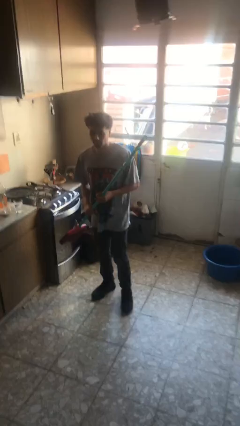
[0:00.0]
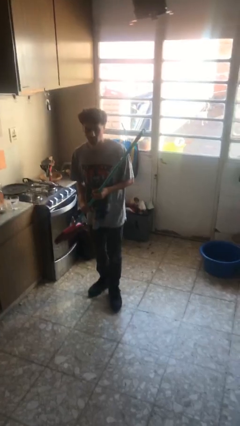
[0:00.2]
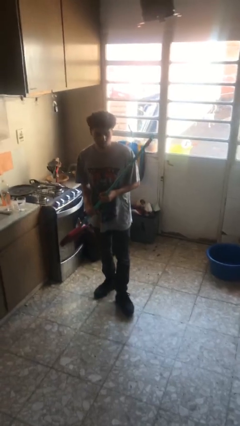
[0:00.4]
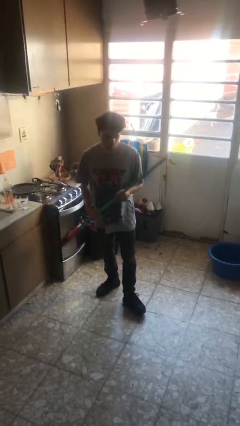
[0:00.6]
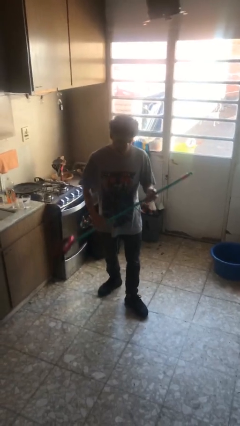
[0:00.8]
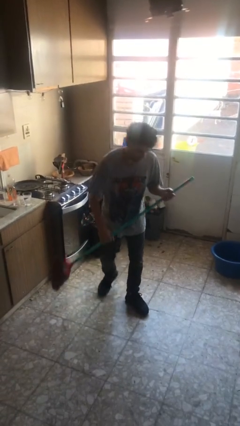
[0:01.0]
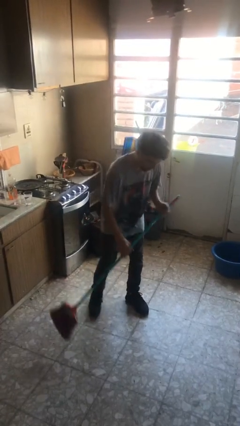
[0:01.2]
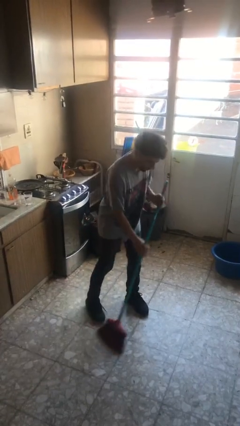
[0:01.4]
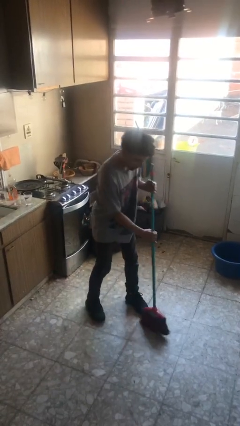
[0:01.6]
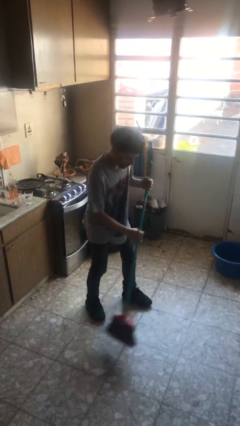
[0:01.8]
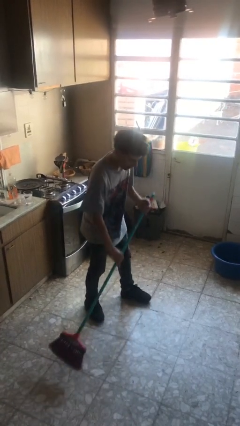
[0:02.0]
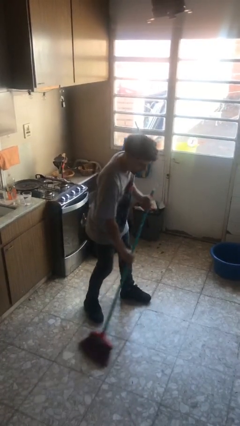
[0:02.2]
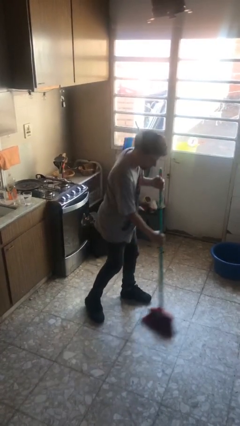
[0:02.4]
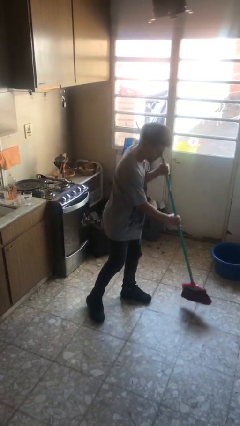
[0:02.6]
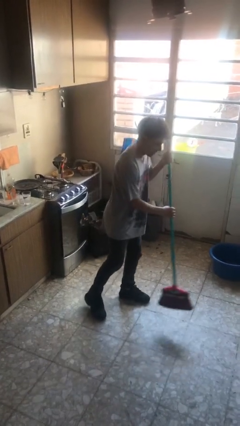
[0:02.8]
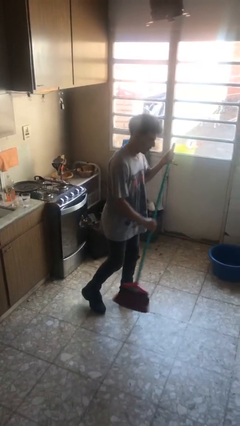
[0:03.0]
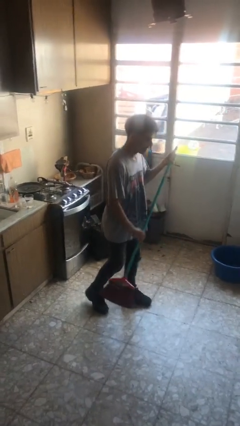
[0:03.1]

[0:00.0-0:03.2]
person sweeps floor

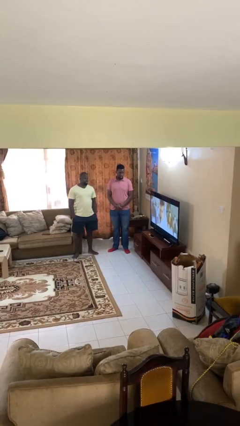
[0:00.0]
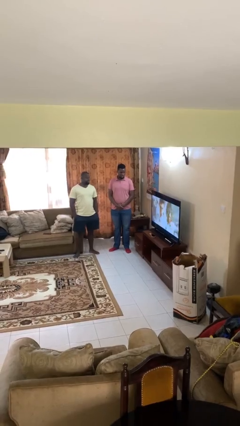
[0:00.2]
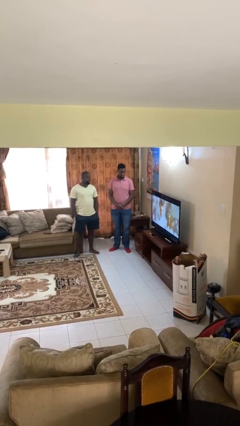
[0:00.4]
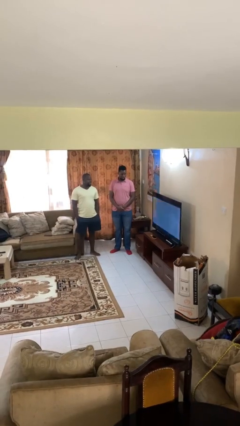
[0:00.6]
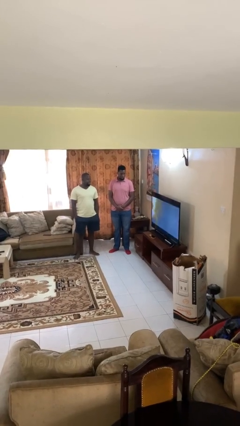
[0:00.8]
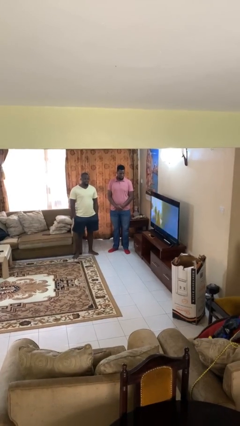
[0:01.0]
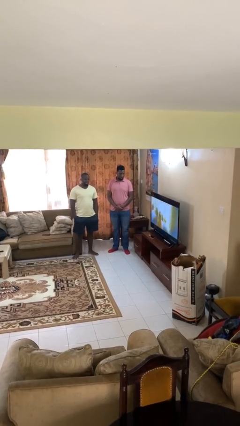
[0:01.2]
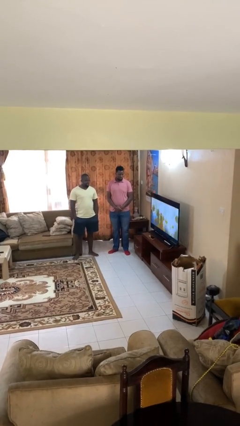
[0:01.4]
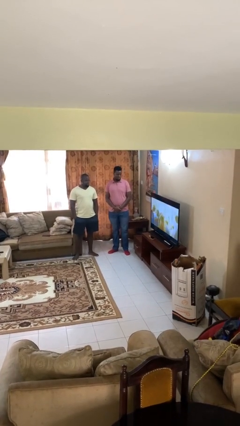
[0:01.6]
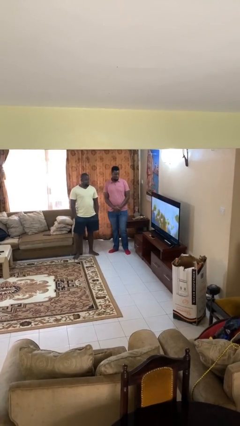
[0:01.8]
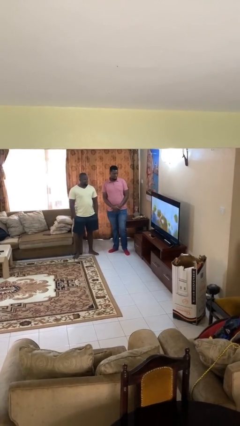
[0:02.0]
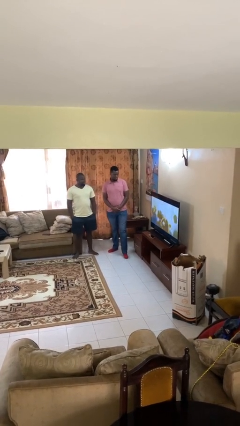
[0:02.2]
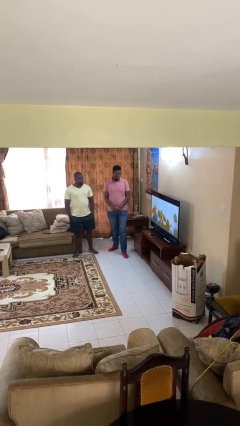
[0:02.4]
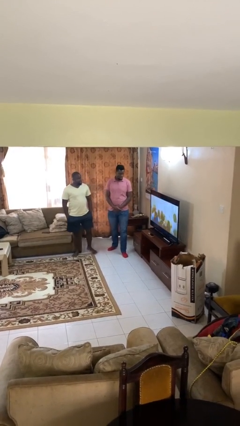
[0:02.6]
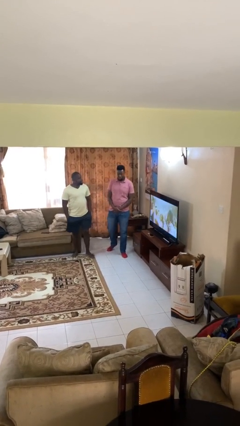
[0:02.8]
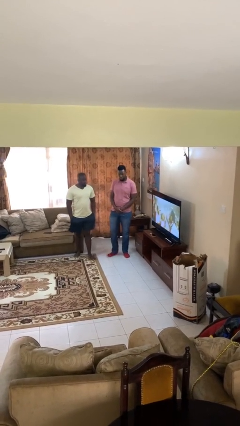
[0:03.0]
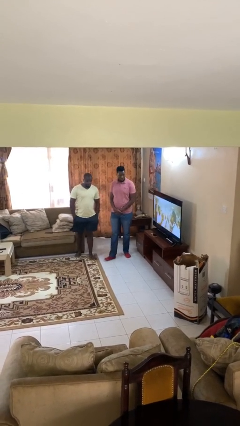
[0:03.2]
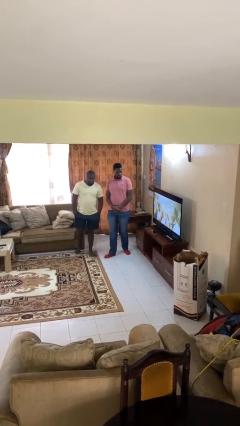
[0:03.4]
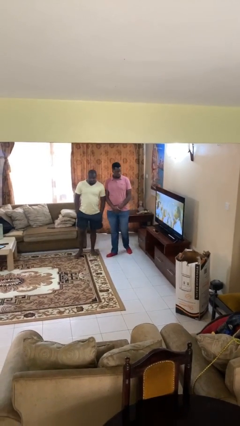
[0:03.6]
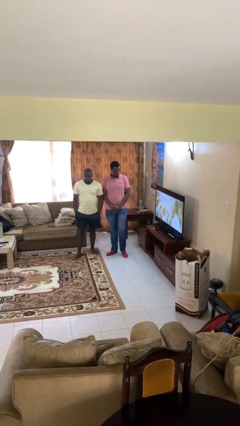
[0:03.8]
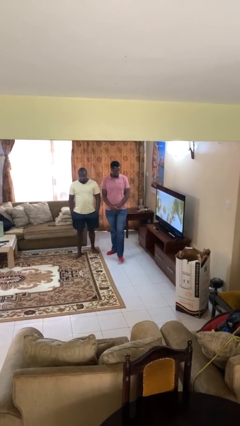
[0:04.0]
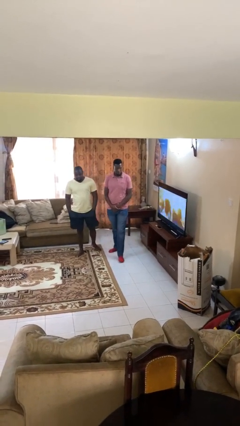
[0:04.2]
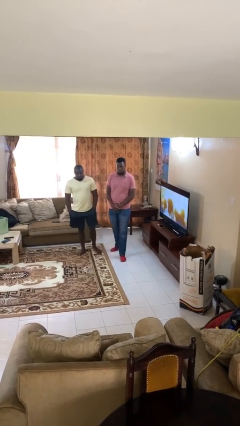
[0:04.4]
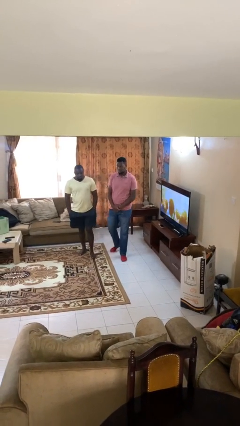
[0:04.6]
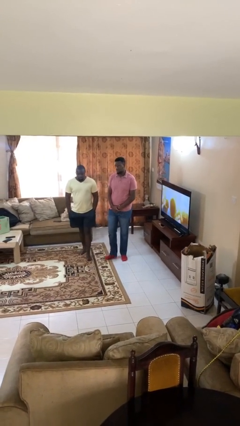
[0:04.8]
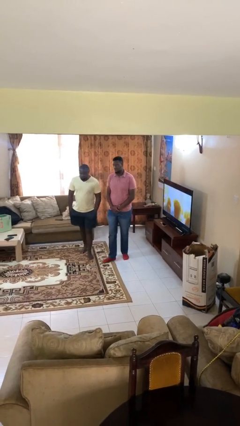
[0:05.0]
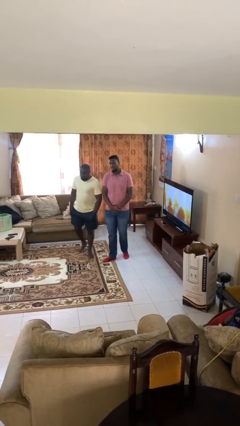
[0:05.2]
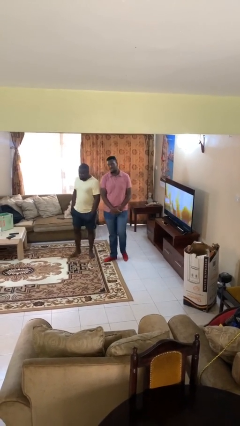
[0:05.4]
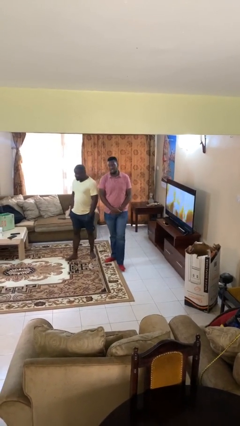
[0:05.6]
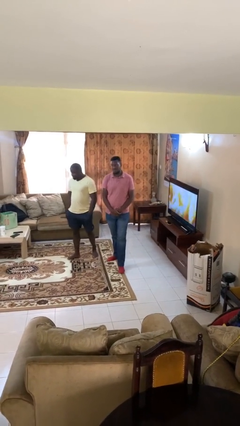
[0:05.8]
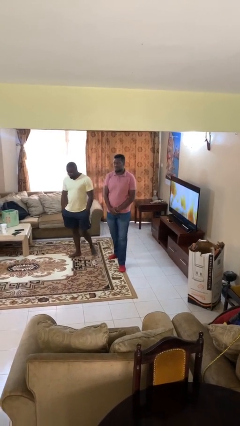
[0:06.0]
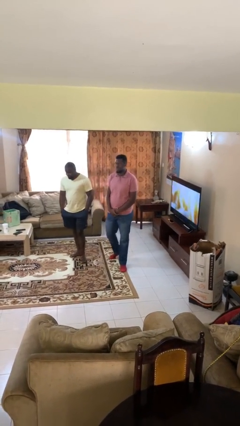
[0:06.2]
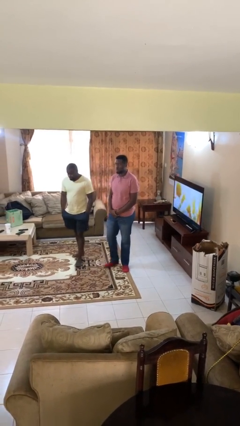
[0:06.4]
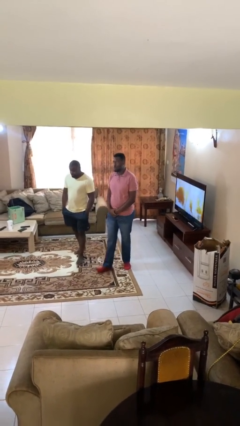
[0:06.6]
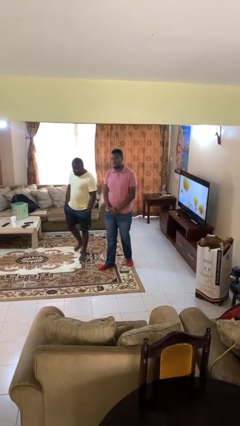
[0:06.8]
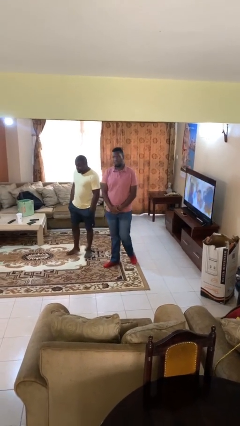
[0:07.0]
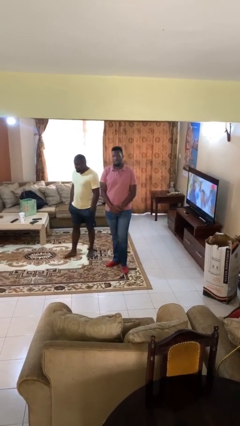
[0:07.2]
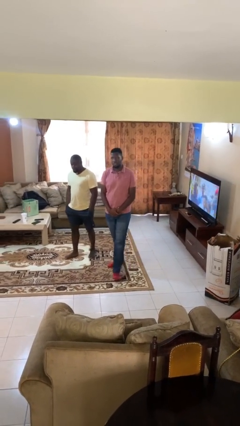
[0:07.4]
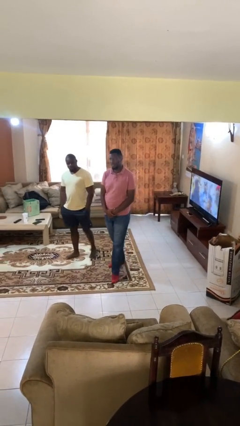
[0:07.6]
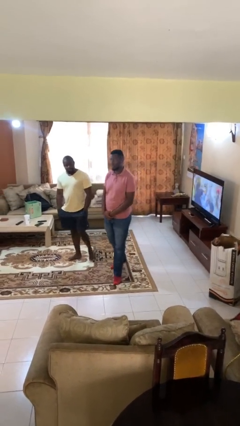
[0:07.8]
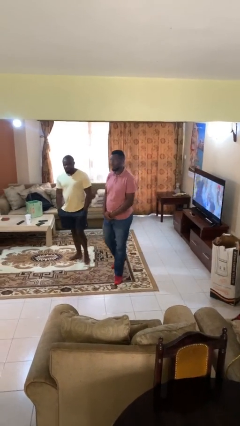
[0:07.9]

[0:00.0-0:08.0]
person talks to person

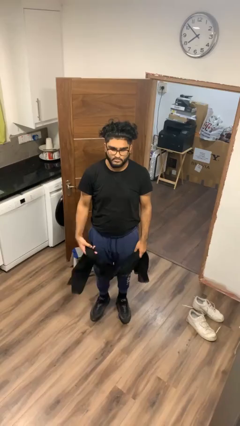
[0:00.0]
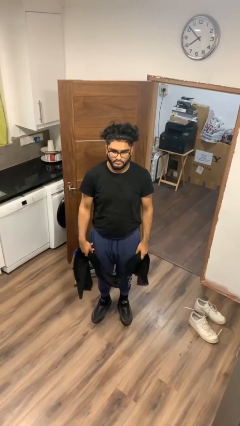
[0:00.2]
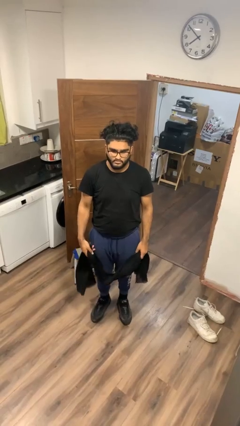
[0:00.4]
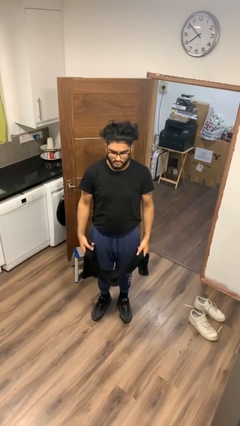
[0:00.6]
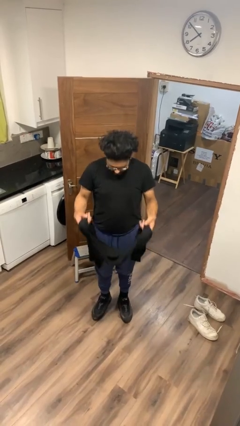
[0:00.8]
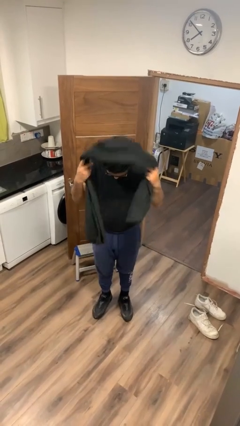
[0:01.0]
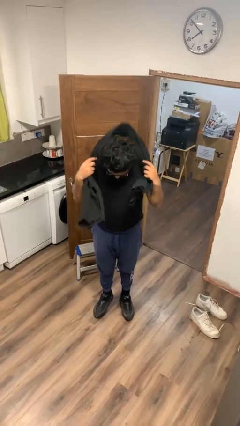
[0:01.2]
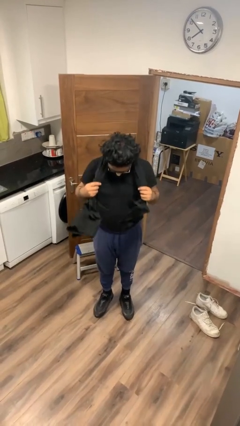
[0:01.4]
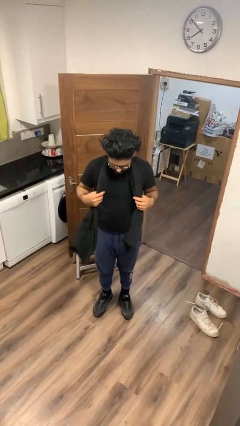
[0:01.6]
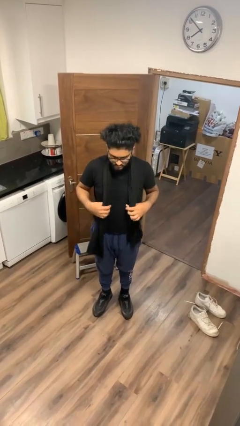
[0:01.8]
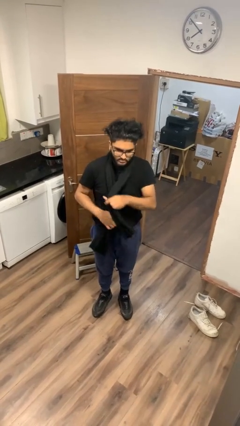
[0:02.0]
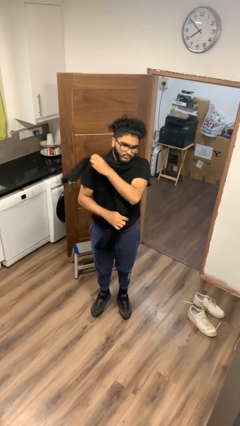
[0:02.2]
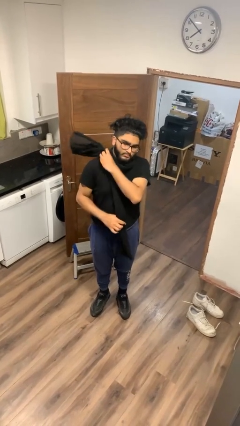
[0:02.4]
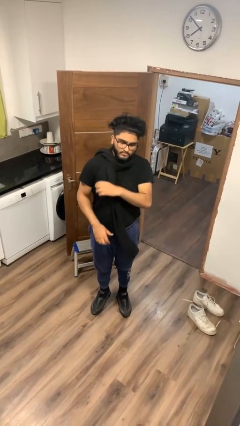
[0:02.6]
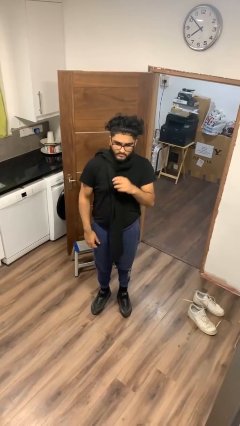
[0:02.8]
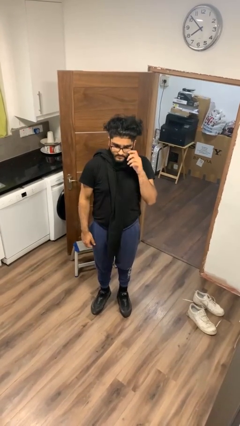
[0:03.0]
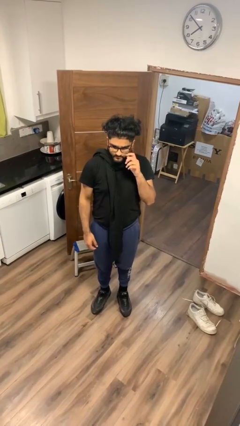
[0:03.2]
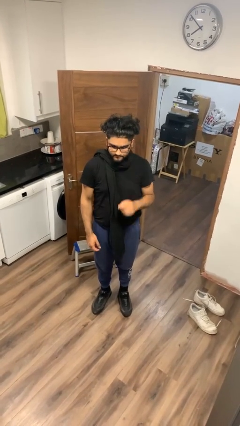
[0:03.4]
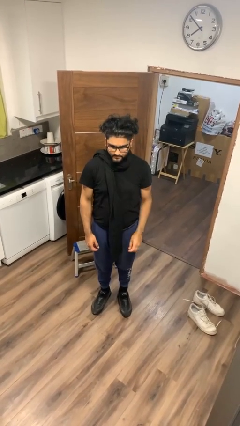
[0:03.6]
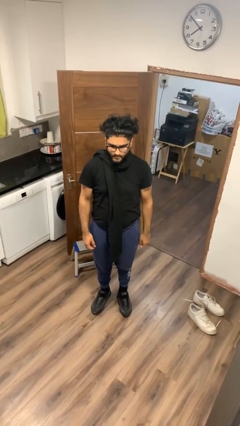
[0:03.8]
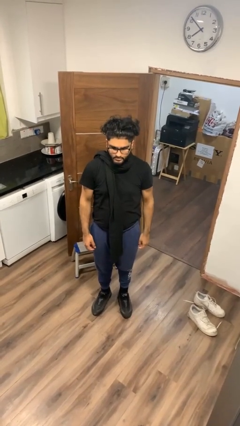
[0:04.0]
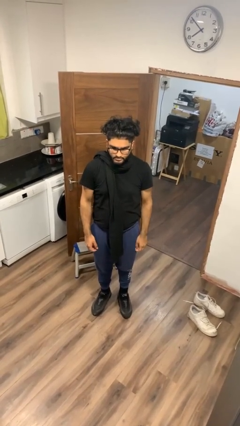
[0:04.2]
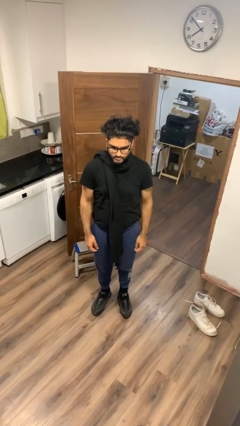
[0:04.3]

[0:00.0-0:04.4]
person puts on scarf

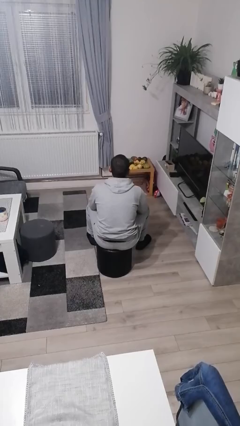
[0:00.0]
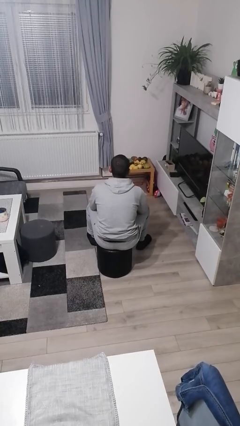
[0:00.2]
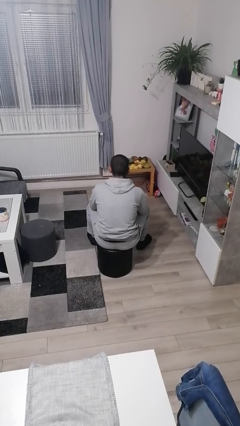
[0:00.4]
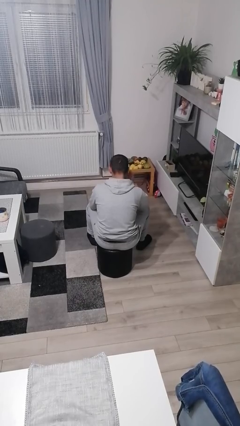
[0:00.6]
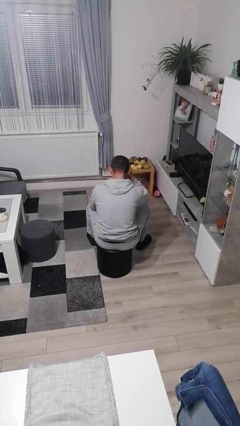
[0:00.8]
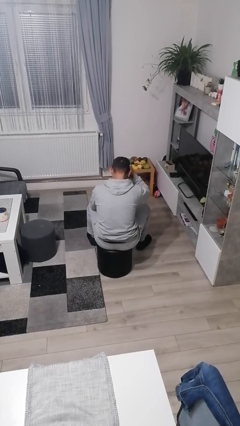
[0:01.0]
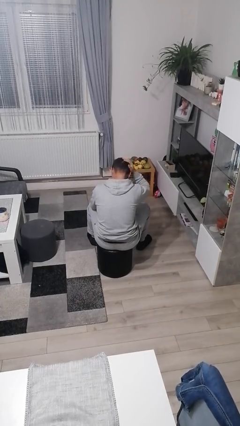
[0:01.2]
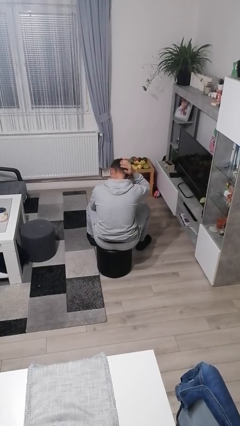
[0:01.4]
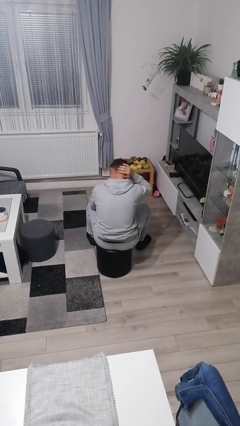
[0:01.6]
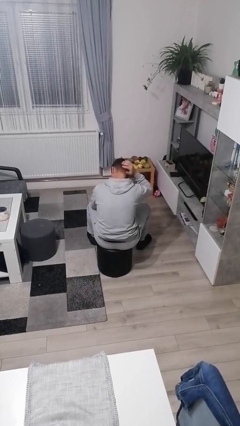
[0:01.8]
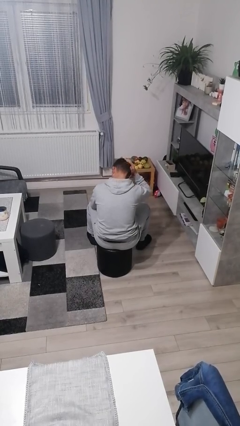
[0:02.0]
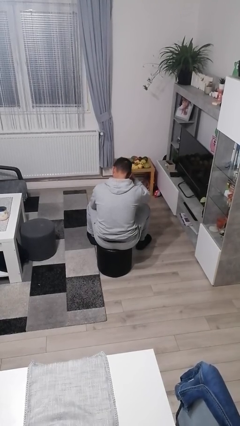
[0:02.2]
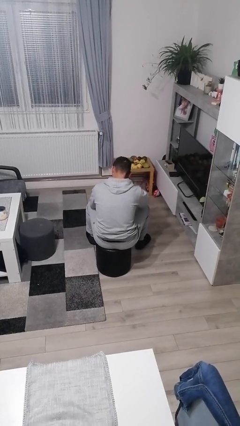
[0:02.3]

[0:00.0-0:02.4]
person strokes hair
